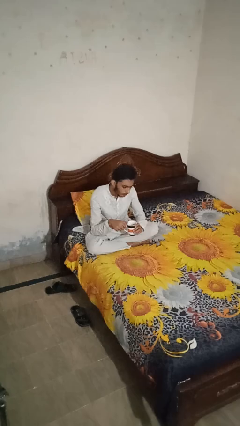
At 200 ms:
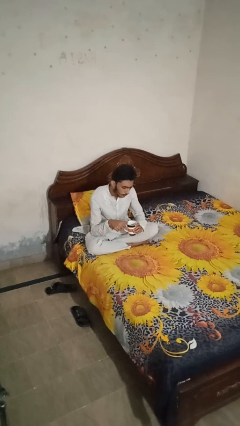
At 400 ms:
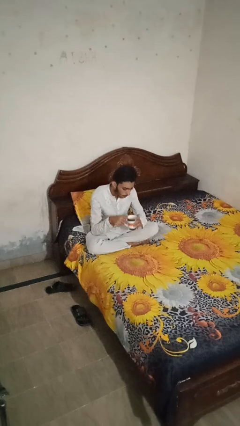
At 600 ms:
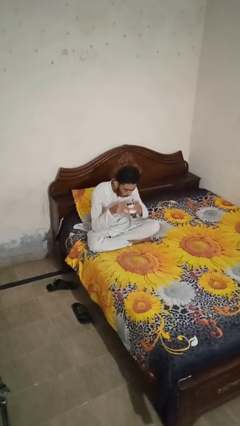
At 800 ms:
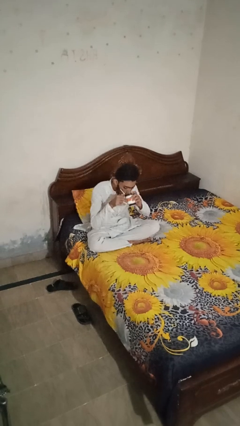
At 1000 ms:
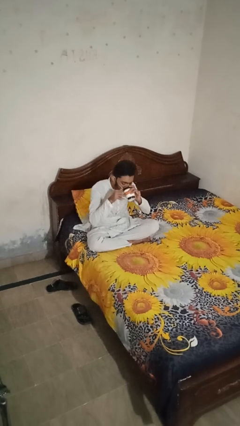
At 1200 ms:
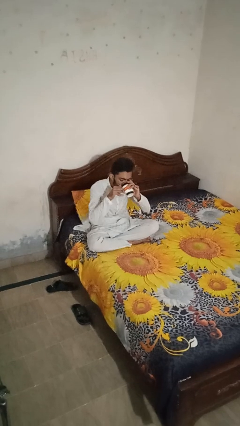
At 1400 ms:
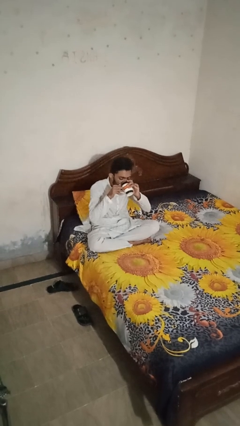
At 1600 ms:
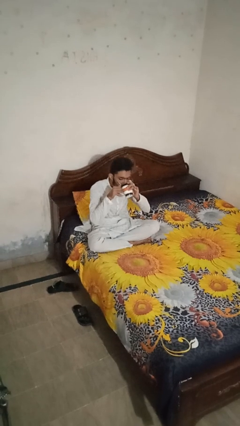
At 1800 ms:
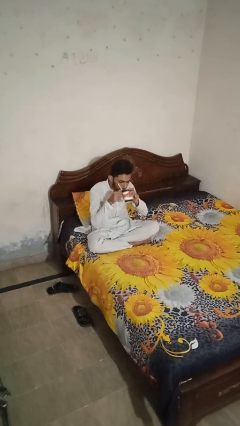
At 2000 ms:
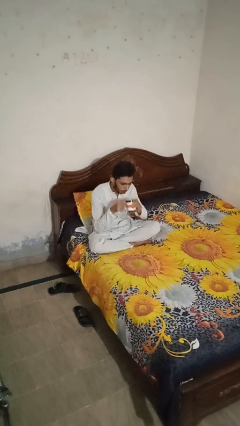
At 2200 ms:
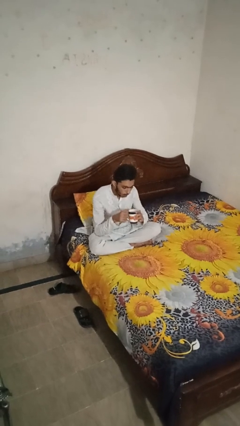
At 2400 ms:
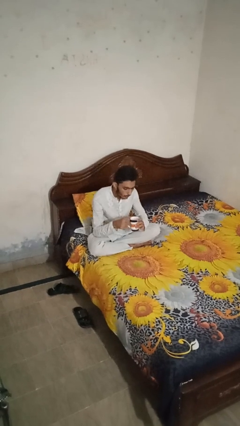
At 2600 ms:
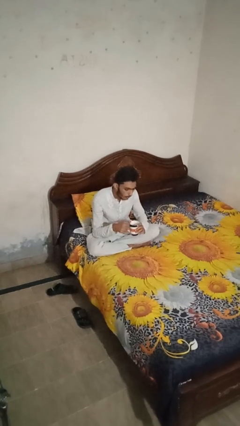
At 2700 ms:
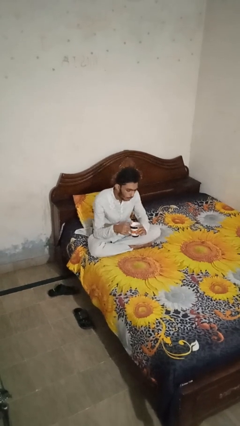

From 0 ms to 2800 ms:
person drinks from mug

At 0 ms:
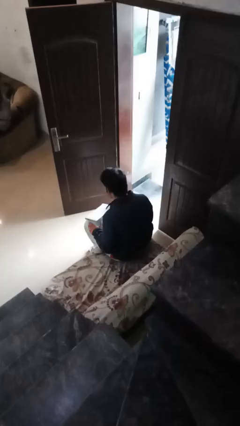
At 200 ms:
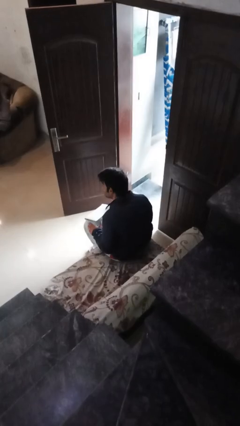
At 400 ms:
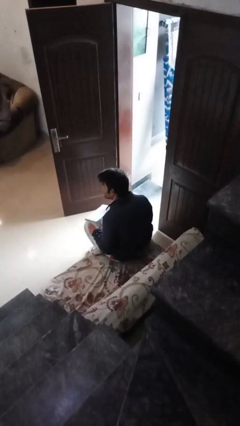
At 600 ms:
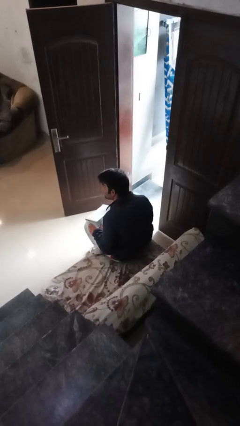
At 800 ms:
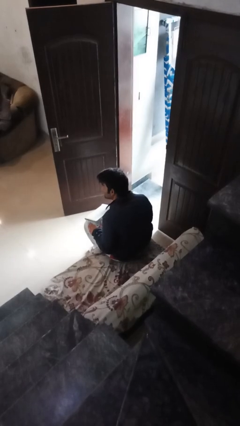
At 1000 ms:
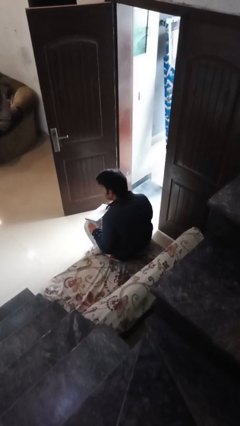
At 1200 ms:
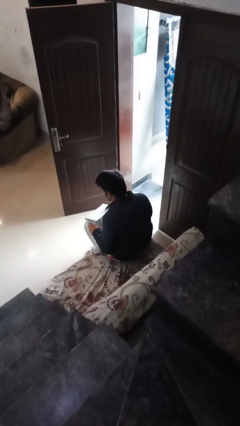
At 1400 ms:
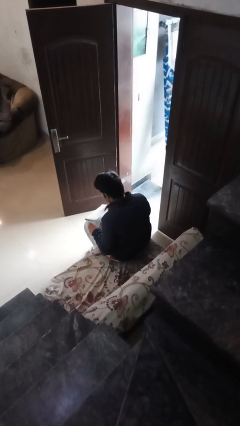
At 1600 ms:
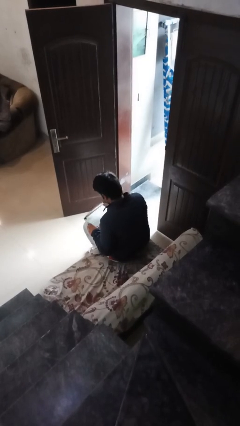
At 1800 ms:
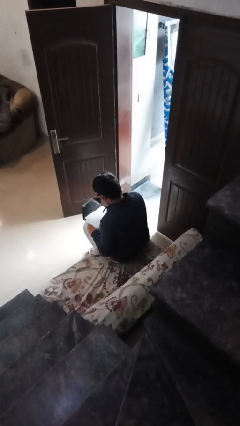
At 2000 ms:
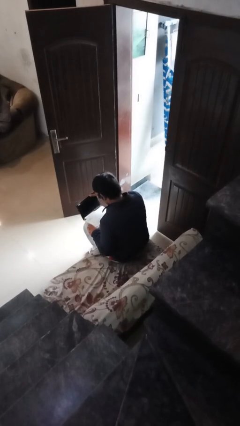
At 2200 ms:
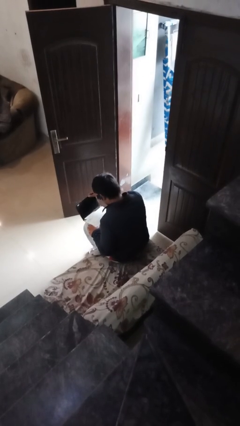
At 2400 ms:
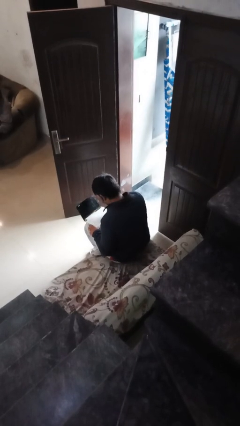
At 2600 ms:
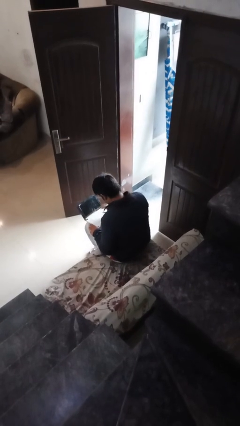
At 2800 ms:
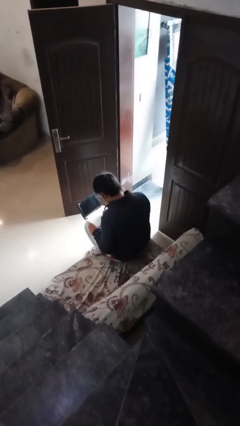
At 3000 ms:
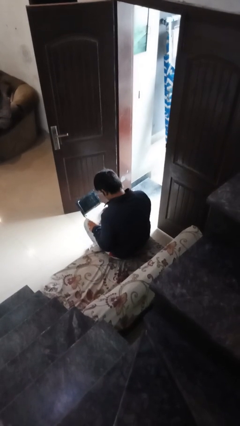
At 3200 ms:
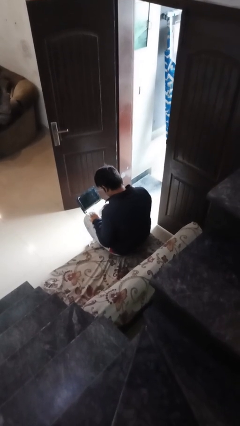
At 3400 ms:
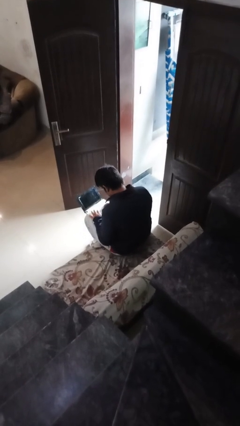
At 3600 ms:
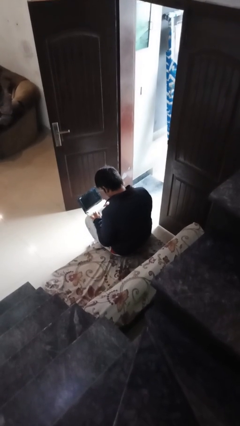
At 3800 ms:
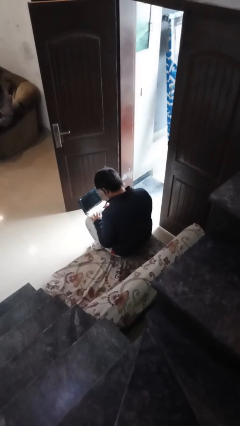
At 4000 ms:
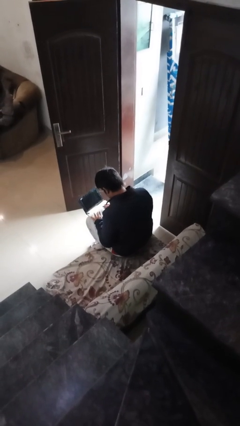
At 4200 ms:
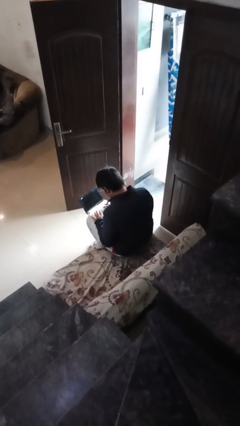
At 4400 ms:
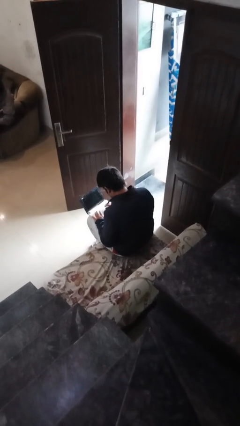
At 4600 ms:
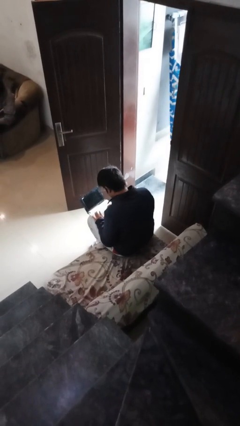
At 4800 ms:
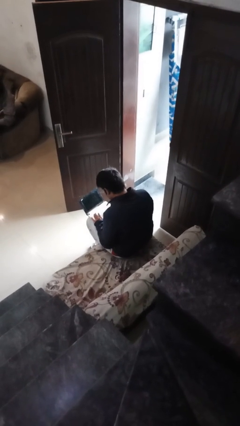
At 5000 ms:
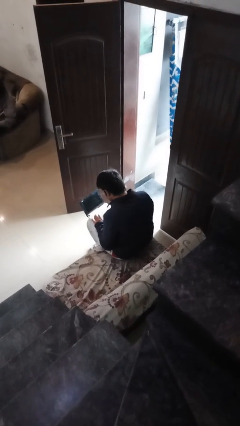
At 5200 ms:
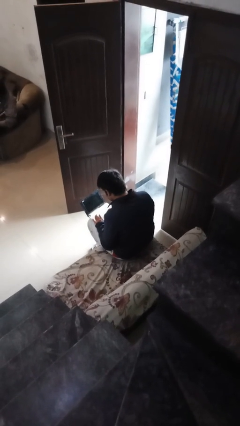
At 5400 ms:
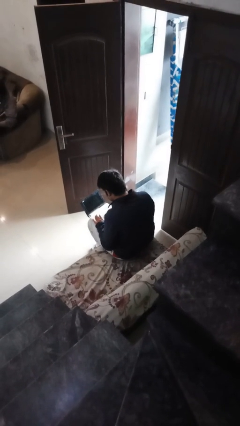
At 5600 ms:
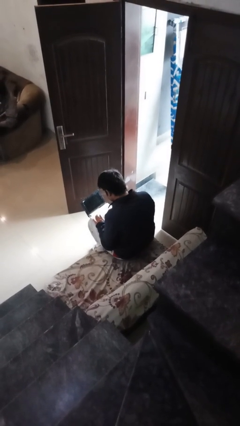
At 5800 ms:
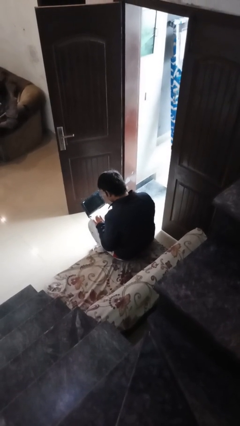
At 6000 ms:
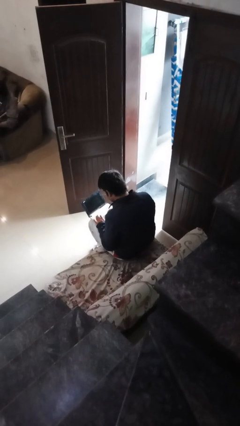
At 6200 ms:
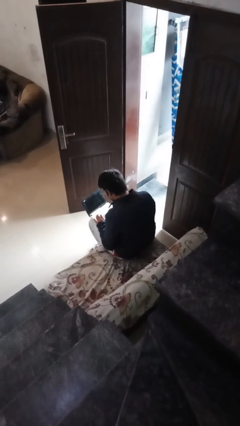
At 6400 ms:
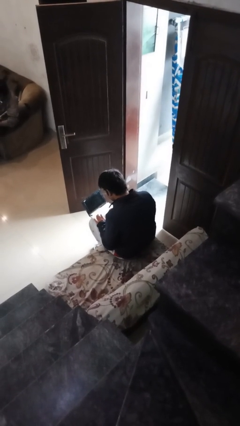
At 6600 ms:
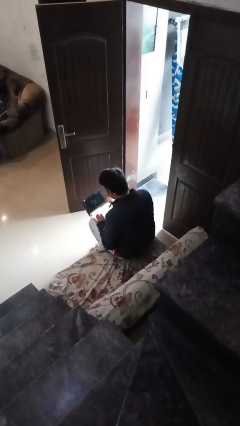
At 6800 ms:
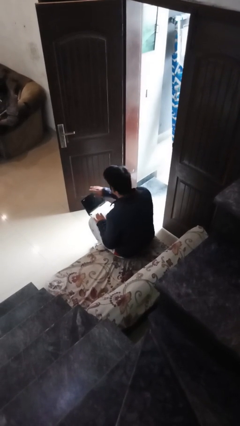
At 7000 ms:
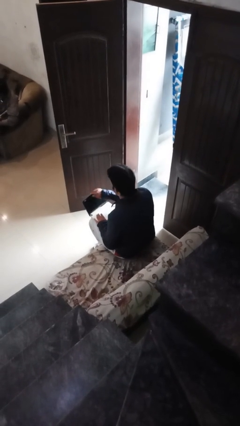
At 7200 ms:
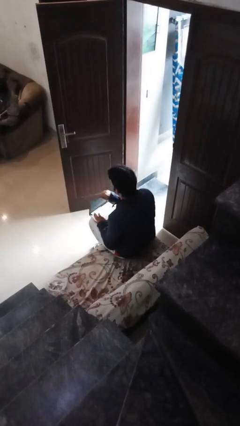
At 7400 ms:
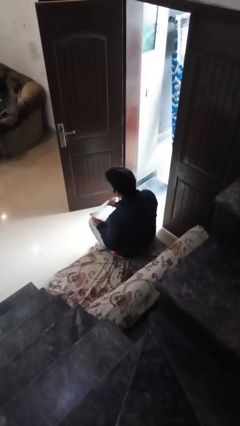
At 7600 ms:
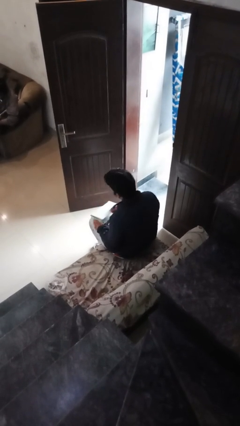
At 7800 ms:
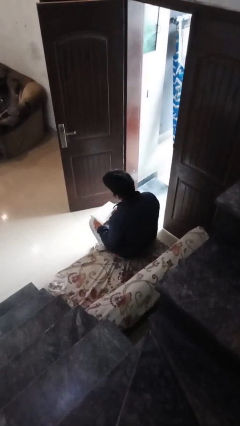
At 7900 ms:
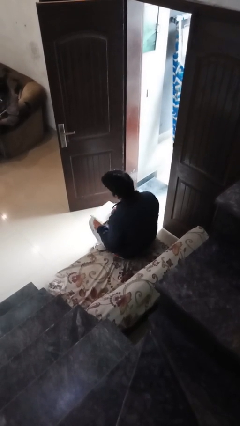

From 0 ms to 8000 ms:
person interacts with laptop

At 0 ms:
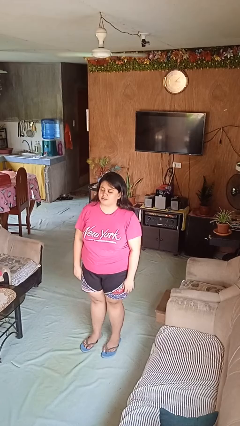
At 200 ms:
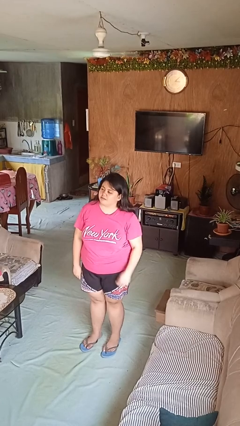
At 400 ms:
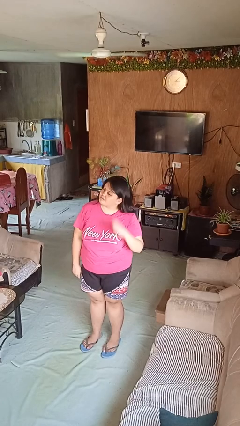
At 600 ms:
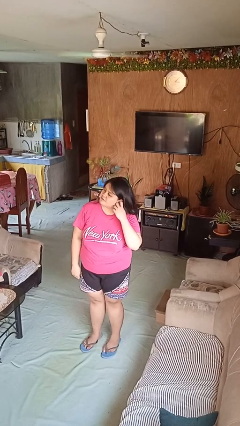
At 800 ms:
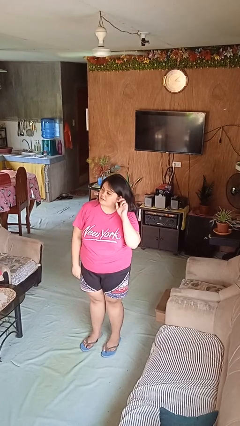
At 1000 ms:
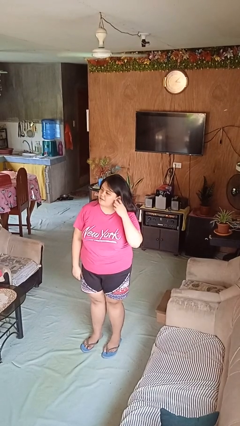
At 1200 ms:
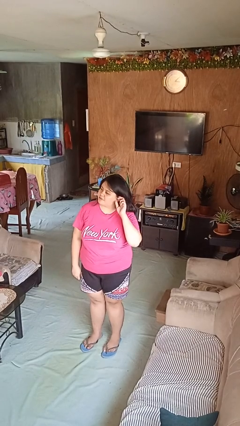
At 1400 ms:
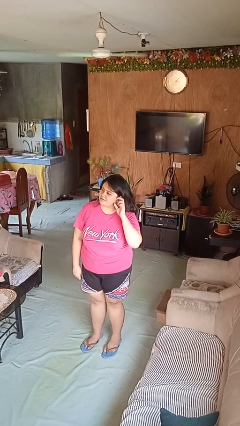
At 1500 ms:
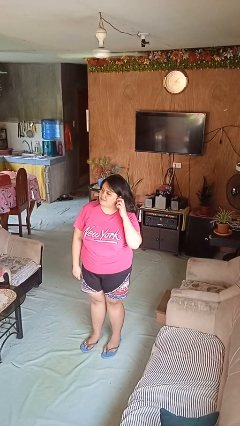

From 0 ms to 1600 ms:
person touches earlobe

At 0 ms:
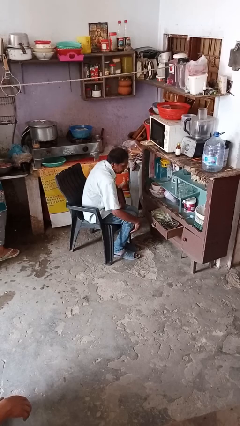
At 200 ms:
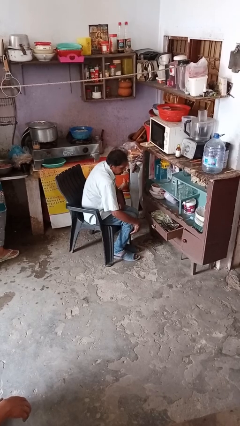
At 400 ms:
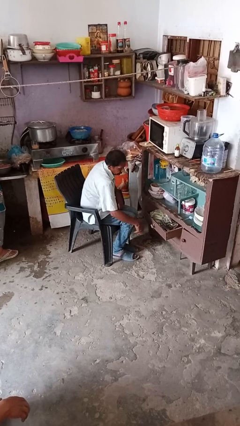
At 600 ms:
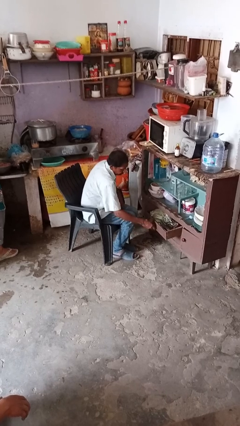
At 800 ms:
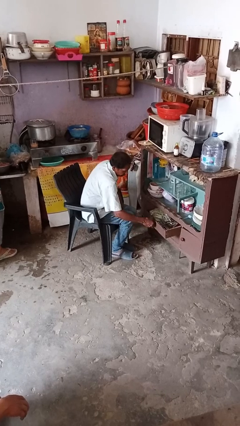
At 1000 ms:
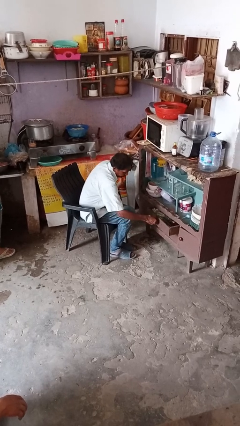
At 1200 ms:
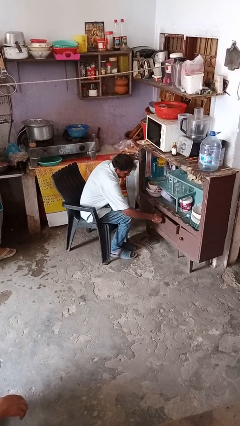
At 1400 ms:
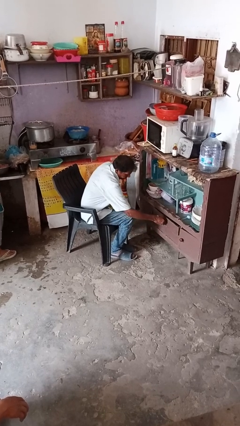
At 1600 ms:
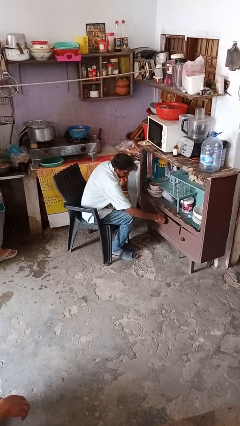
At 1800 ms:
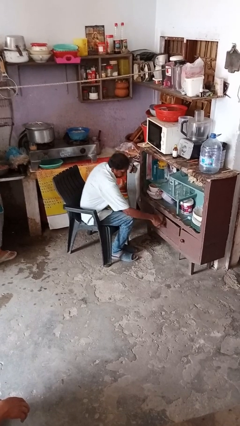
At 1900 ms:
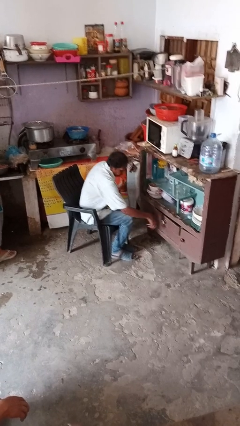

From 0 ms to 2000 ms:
person closes dresser drawer

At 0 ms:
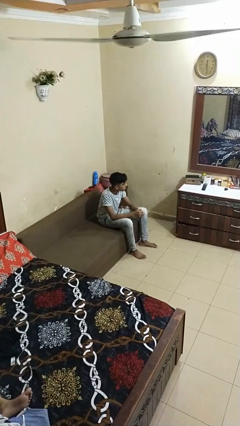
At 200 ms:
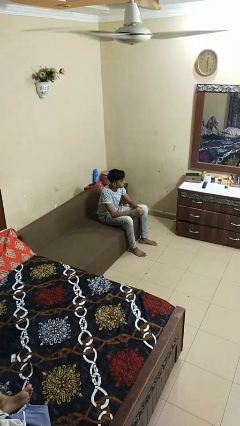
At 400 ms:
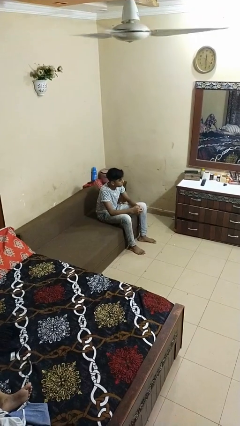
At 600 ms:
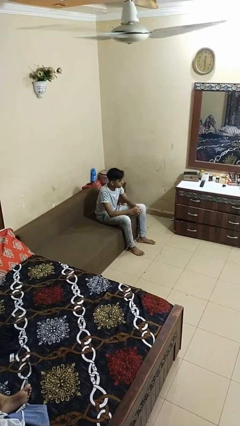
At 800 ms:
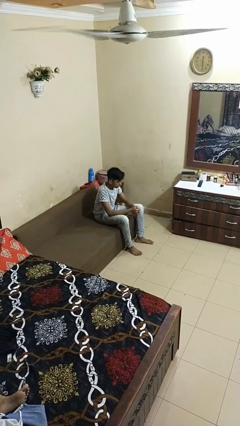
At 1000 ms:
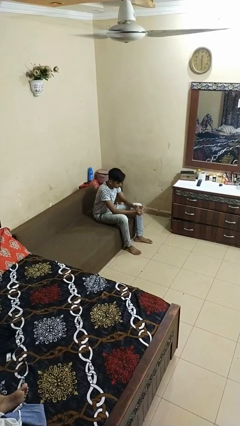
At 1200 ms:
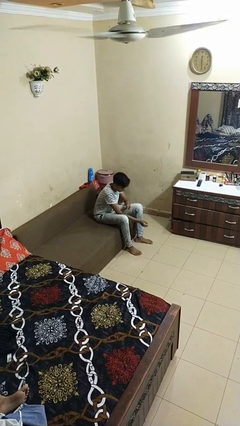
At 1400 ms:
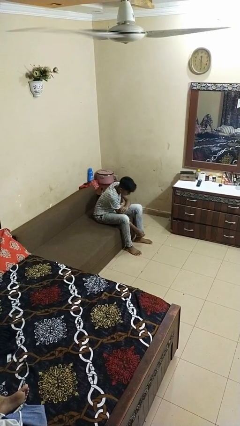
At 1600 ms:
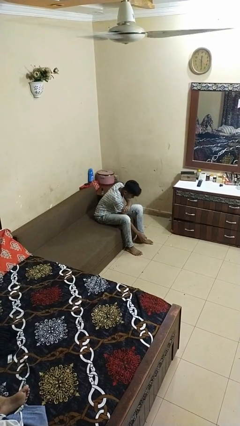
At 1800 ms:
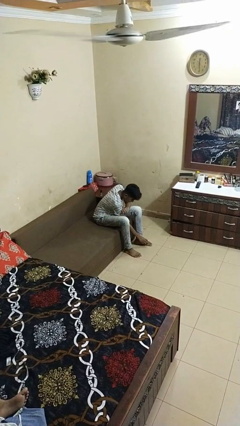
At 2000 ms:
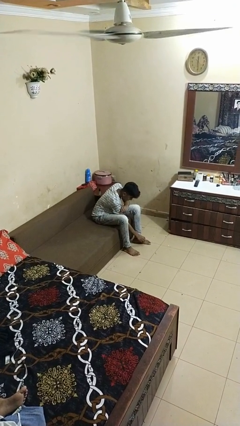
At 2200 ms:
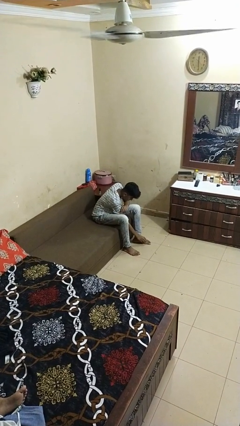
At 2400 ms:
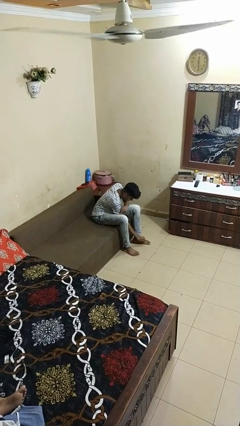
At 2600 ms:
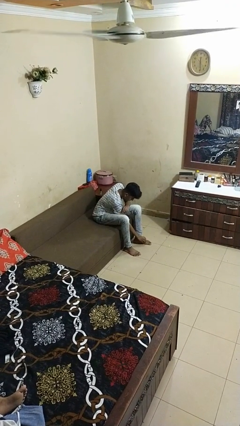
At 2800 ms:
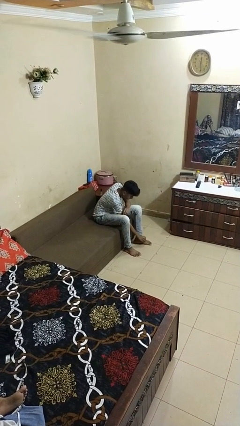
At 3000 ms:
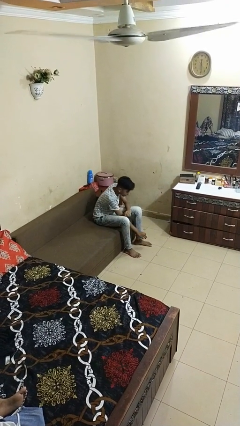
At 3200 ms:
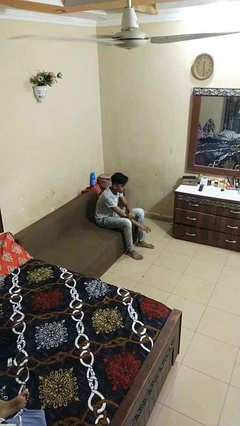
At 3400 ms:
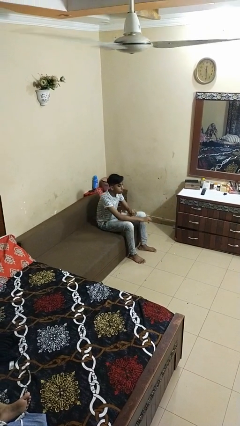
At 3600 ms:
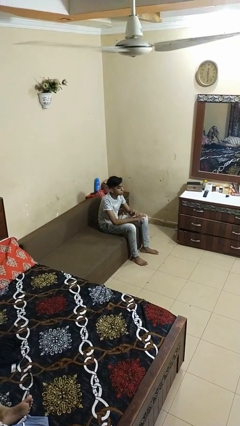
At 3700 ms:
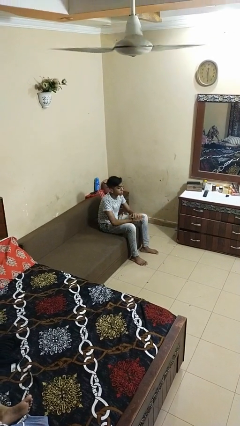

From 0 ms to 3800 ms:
person rubs foot
